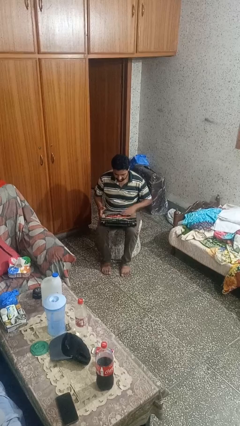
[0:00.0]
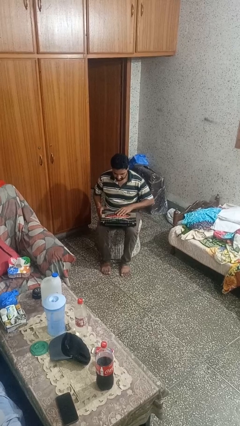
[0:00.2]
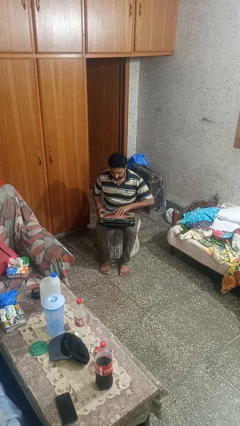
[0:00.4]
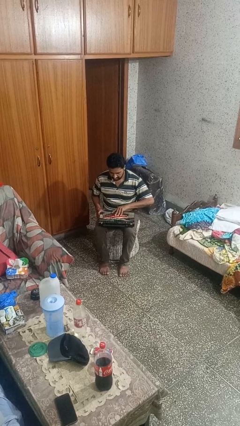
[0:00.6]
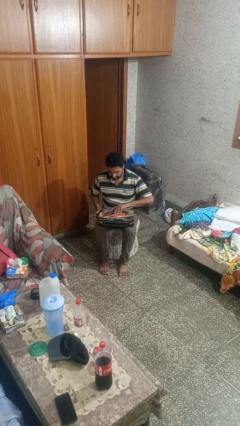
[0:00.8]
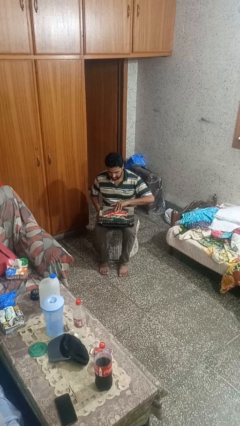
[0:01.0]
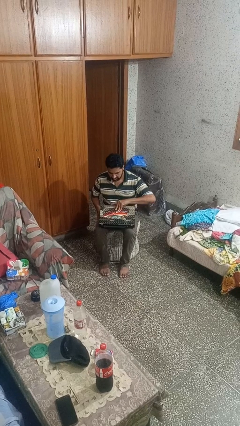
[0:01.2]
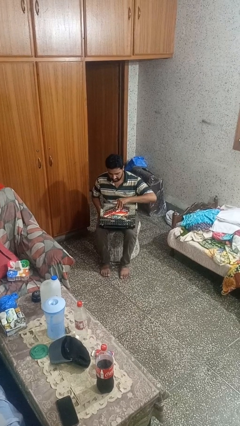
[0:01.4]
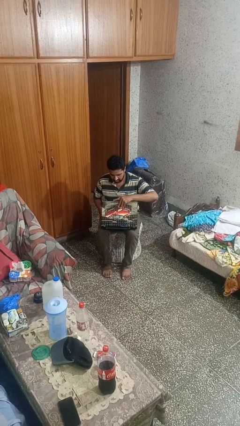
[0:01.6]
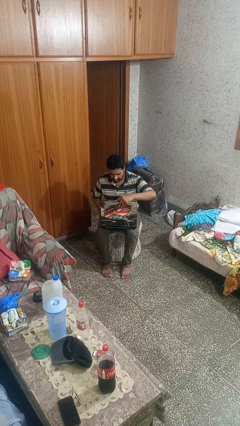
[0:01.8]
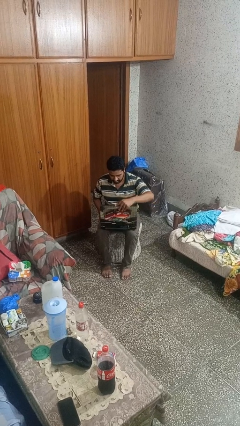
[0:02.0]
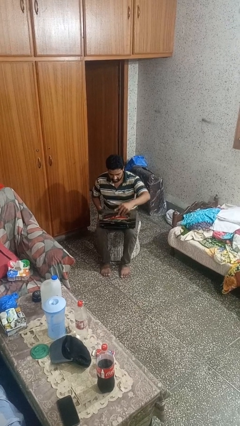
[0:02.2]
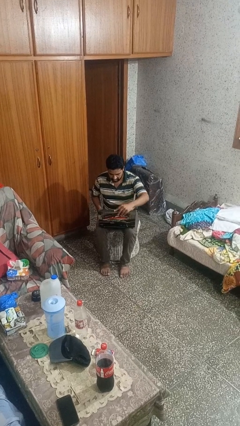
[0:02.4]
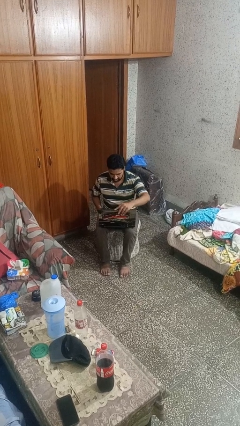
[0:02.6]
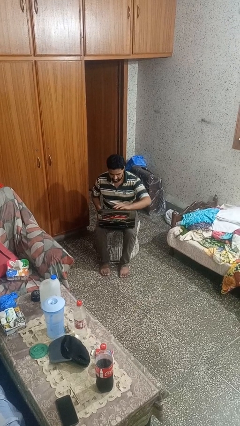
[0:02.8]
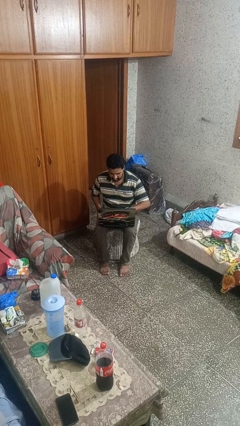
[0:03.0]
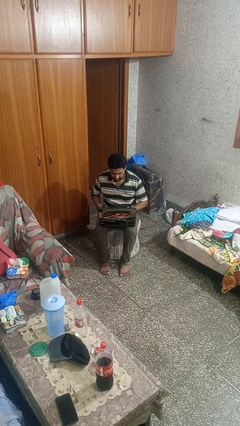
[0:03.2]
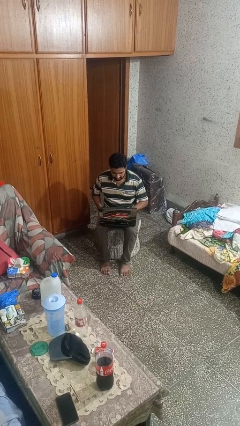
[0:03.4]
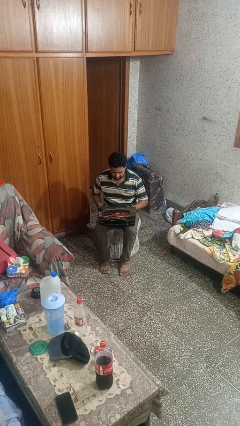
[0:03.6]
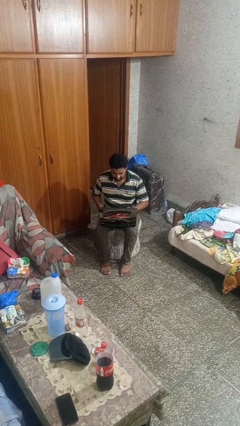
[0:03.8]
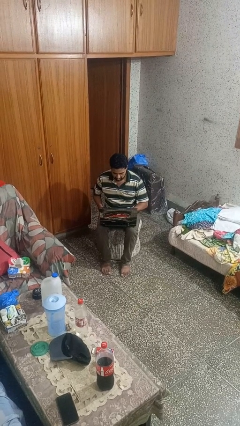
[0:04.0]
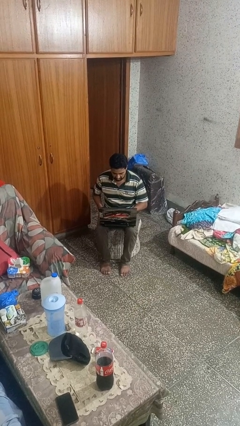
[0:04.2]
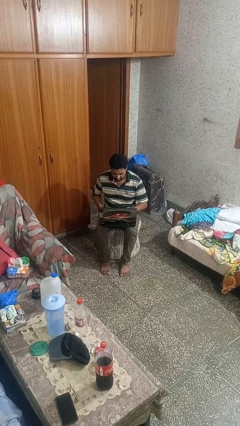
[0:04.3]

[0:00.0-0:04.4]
person opens laptop

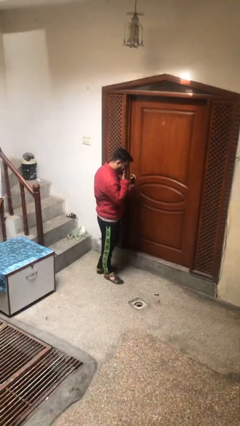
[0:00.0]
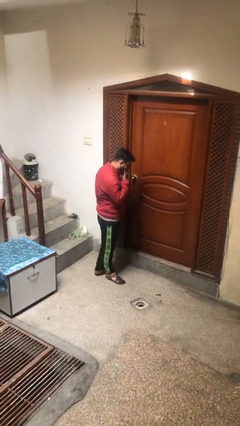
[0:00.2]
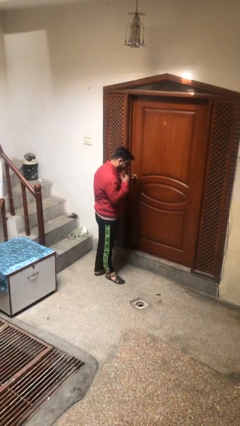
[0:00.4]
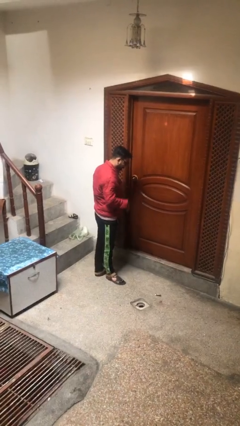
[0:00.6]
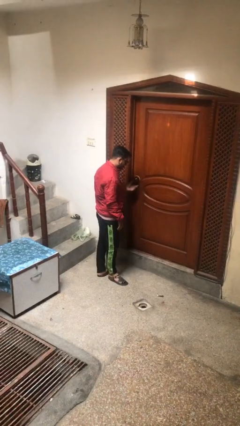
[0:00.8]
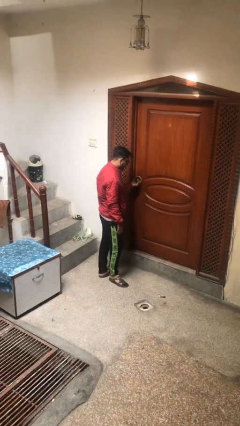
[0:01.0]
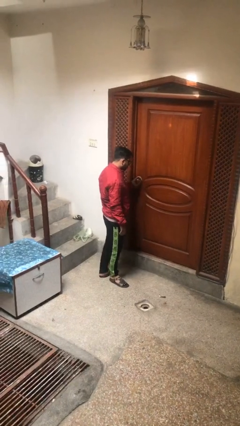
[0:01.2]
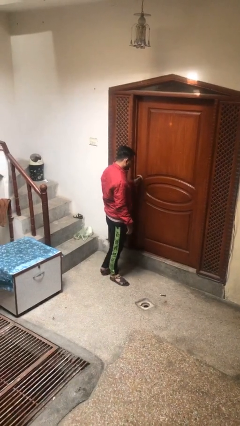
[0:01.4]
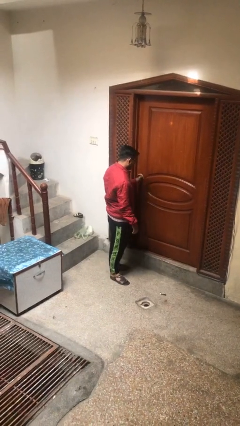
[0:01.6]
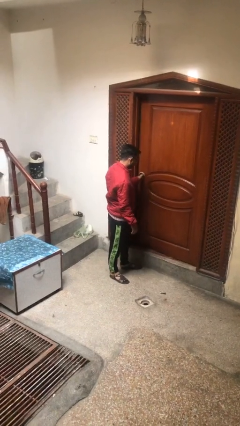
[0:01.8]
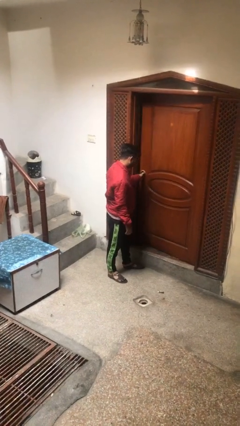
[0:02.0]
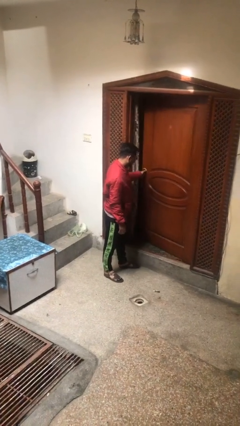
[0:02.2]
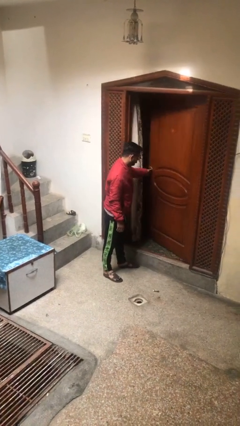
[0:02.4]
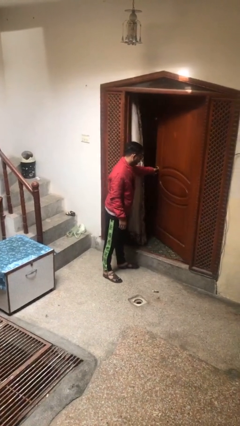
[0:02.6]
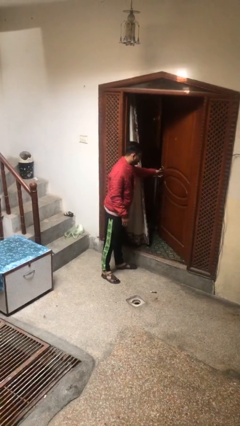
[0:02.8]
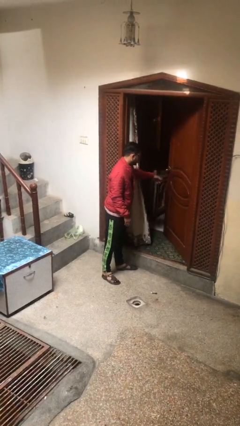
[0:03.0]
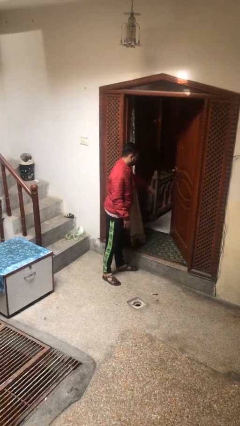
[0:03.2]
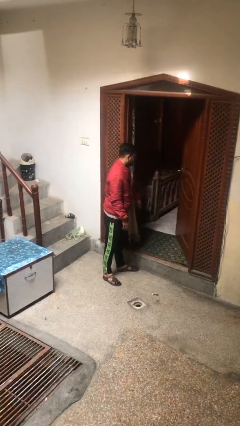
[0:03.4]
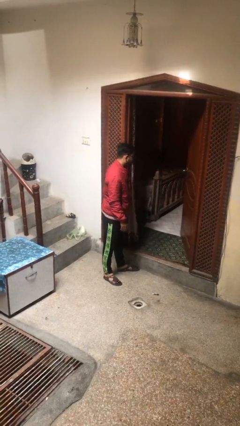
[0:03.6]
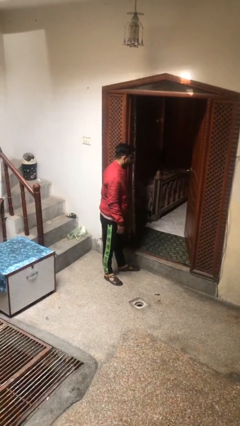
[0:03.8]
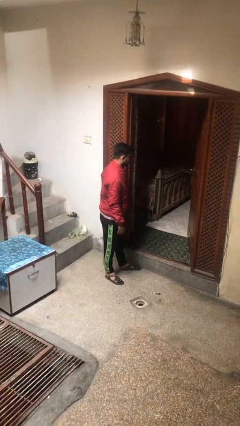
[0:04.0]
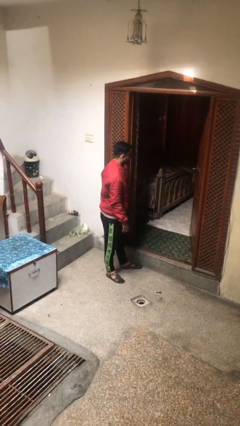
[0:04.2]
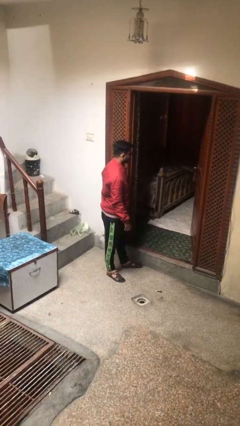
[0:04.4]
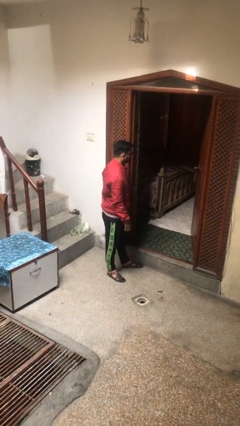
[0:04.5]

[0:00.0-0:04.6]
person opens facility door

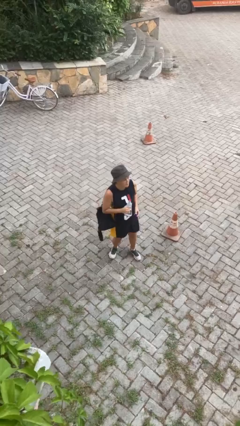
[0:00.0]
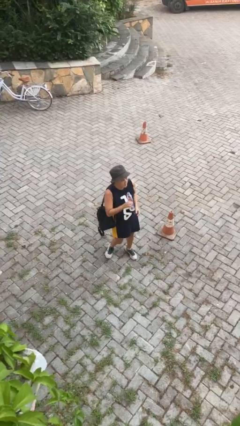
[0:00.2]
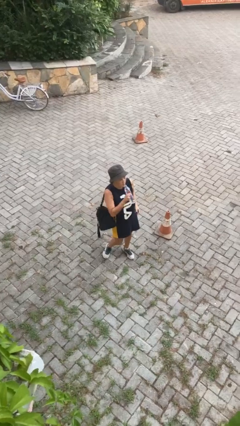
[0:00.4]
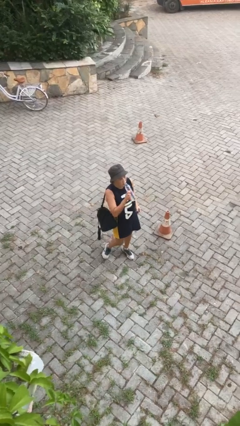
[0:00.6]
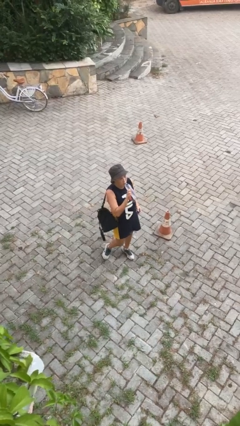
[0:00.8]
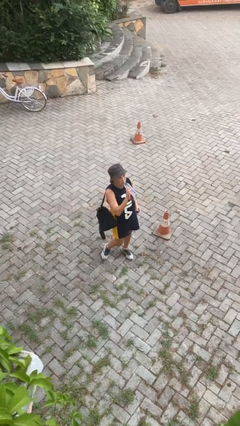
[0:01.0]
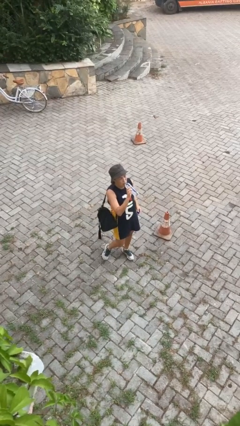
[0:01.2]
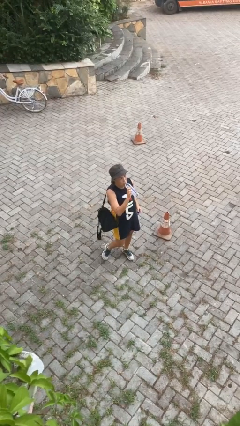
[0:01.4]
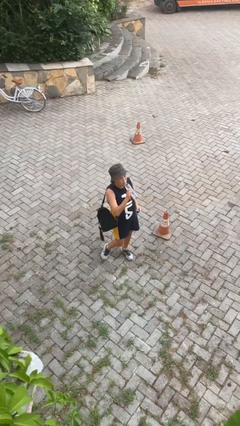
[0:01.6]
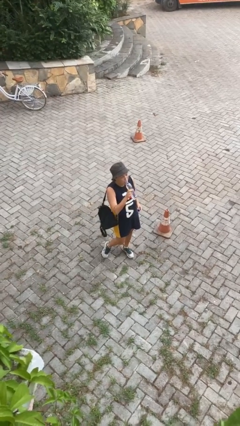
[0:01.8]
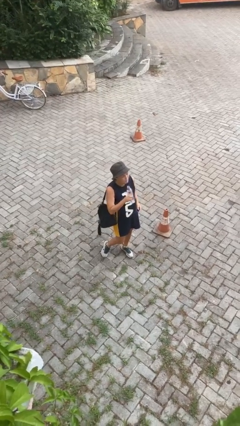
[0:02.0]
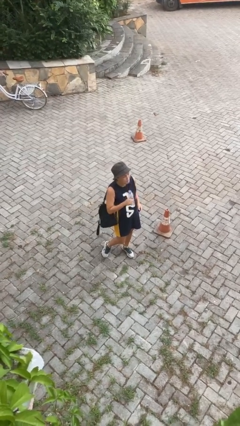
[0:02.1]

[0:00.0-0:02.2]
person drinks from bottle

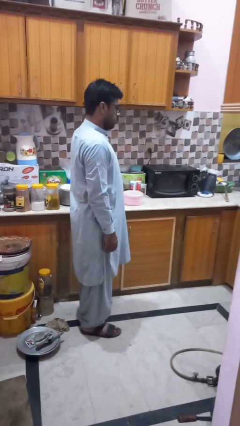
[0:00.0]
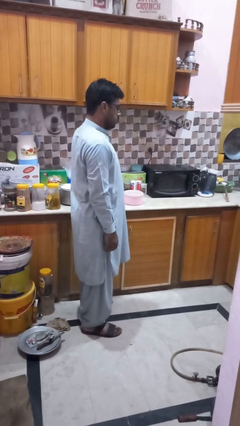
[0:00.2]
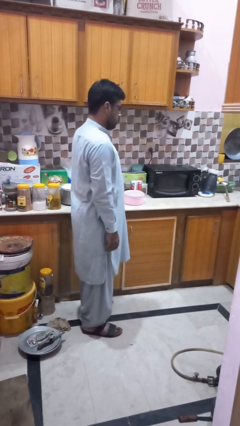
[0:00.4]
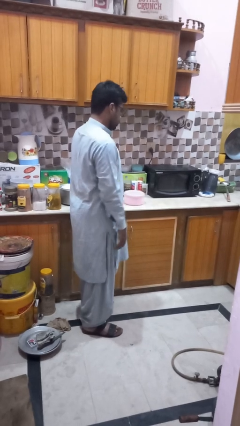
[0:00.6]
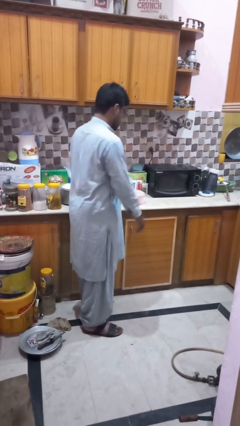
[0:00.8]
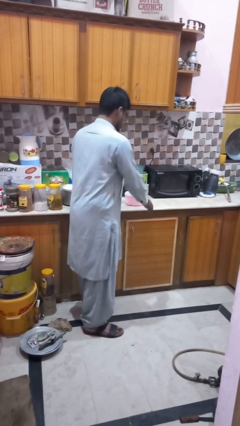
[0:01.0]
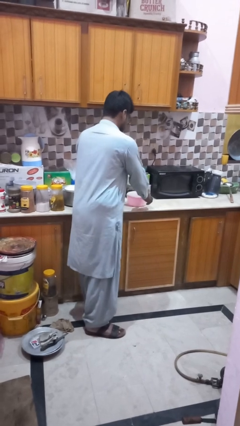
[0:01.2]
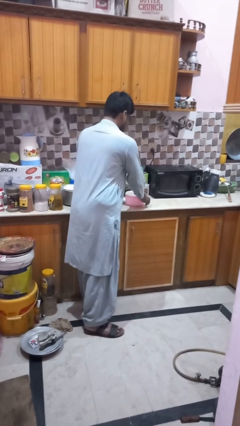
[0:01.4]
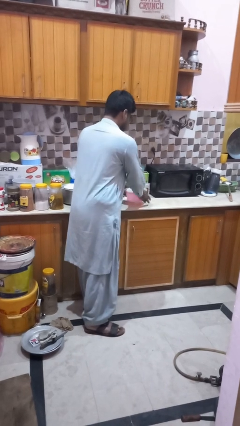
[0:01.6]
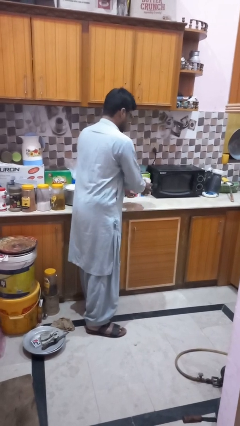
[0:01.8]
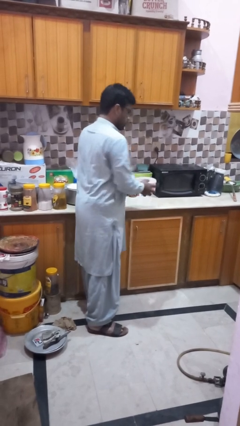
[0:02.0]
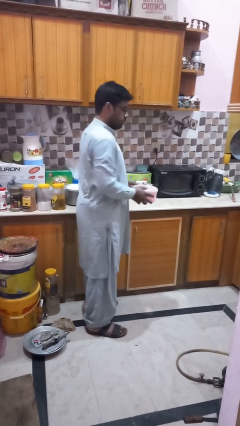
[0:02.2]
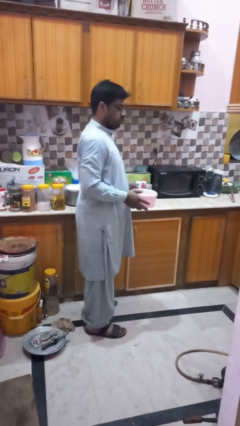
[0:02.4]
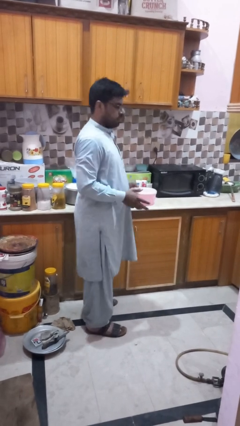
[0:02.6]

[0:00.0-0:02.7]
person picks up object from countertop

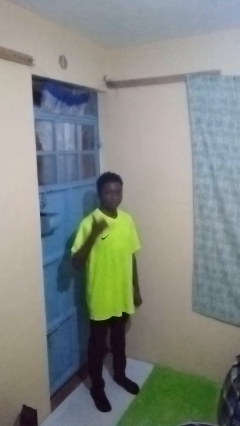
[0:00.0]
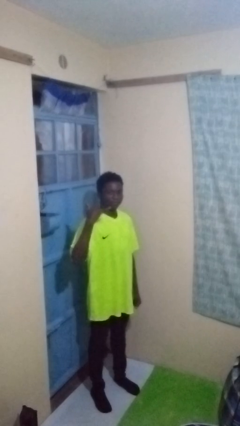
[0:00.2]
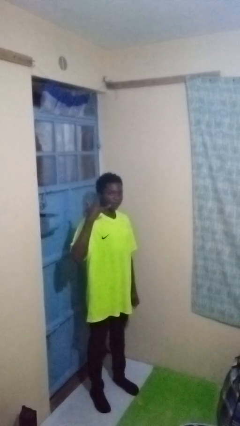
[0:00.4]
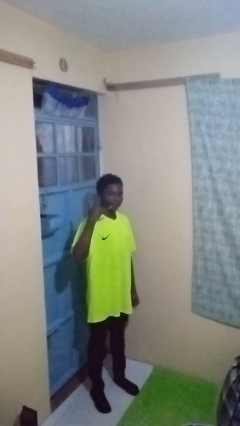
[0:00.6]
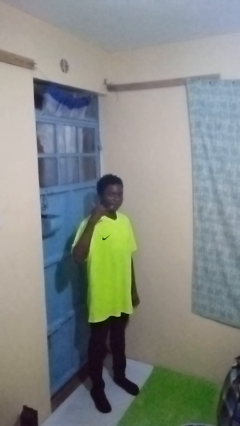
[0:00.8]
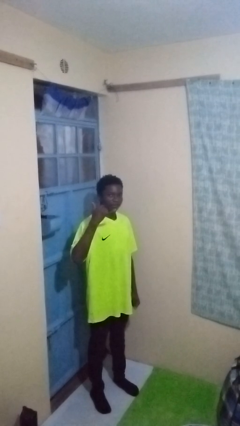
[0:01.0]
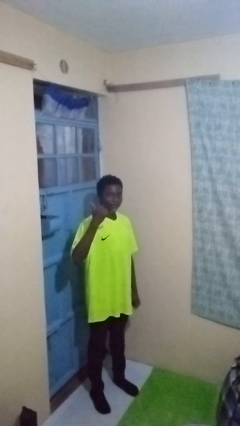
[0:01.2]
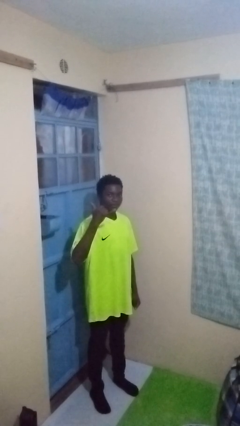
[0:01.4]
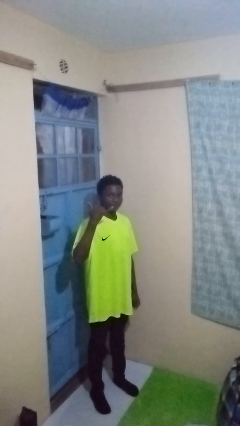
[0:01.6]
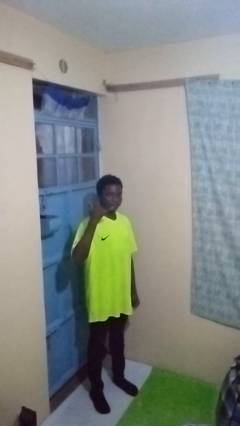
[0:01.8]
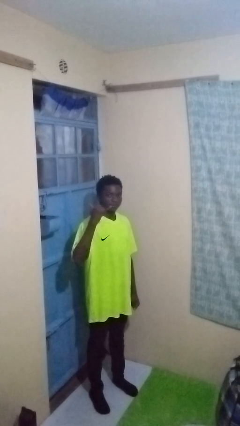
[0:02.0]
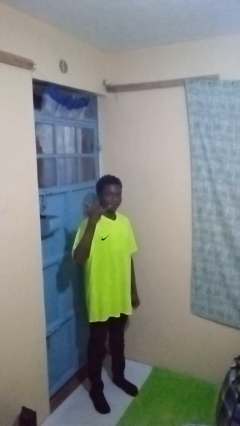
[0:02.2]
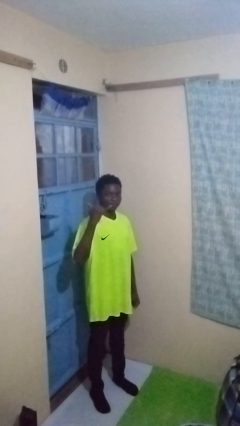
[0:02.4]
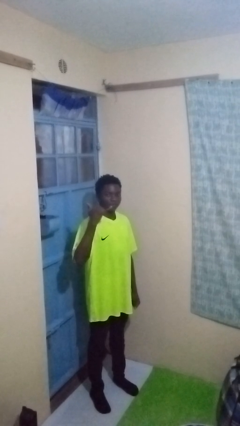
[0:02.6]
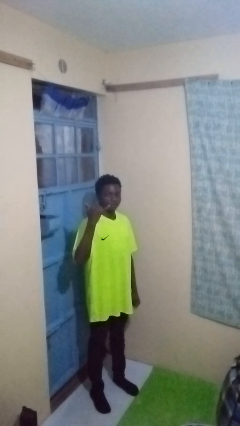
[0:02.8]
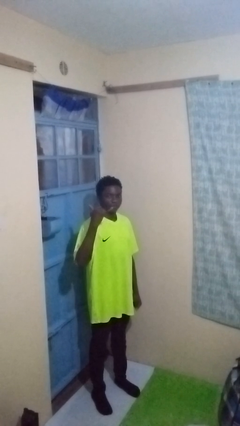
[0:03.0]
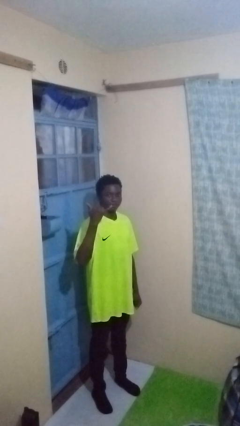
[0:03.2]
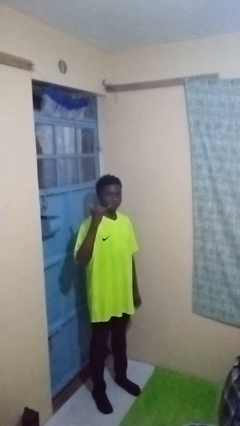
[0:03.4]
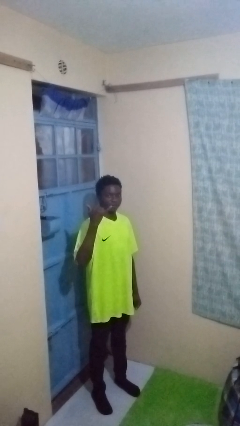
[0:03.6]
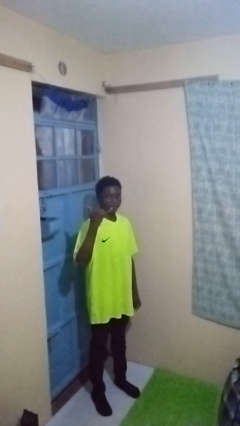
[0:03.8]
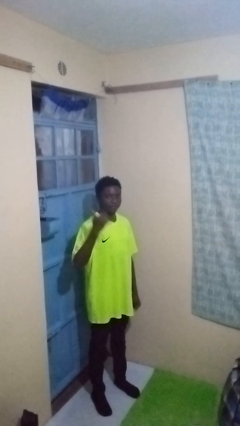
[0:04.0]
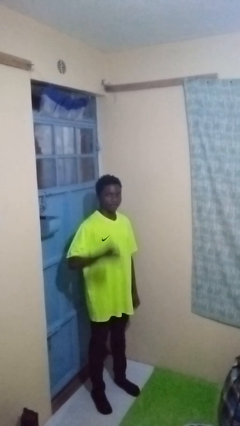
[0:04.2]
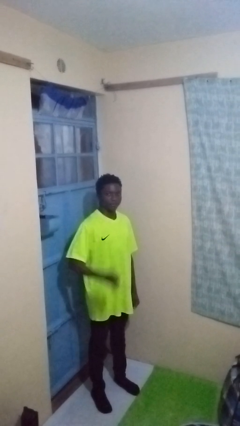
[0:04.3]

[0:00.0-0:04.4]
person gestures hang loose
